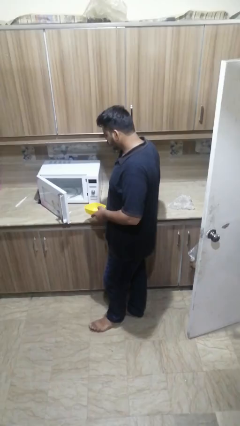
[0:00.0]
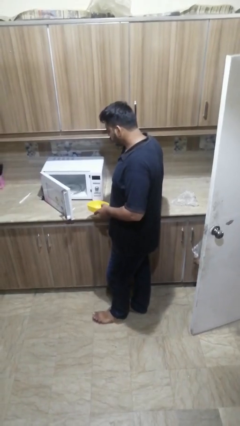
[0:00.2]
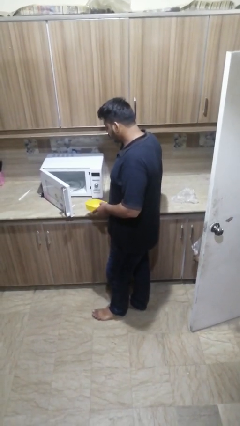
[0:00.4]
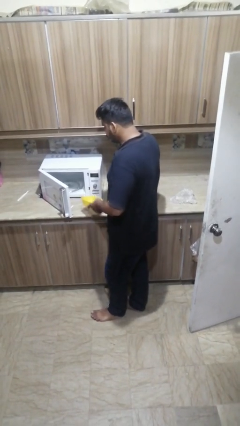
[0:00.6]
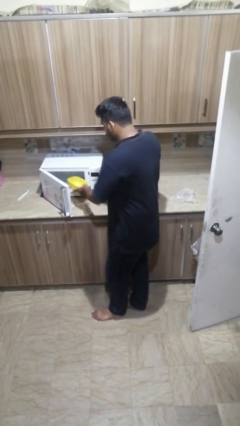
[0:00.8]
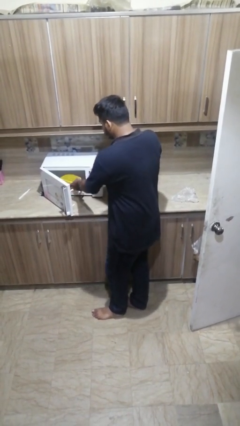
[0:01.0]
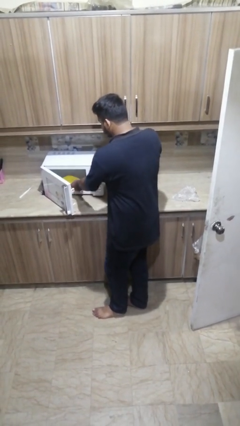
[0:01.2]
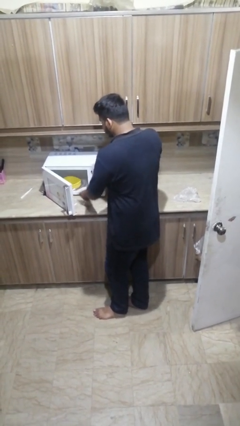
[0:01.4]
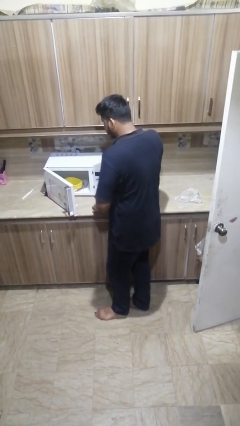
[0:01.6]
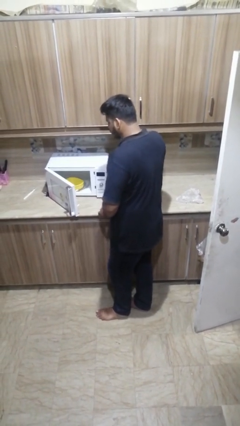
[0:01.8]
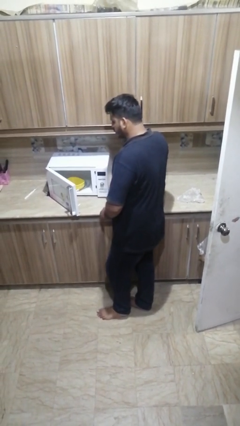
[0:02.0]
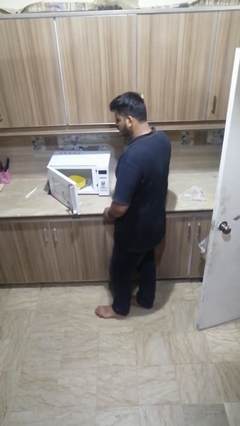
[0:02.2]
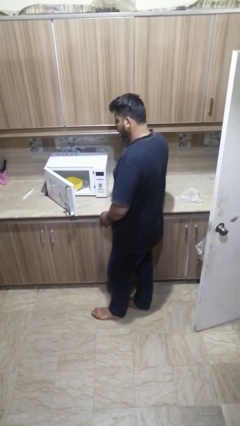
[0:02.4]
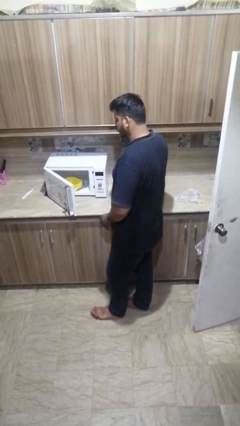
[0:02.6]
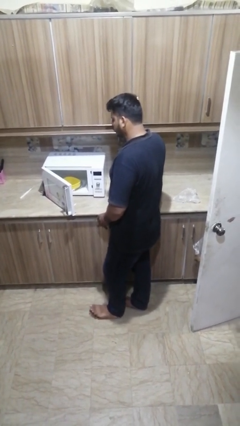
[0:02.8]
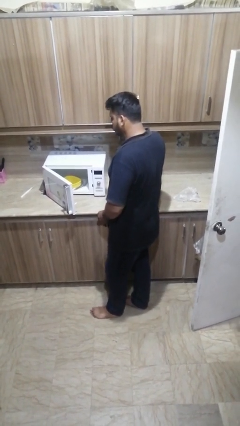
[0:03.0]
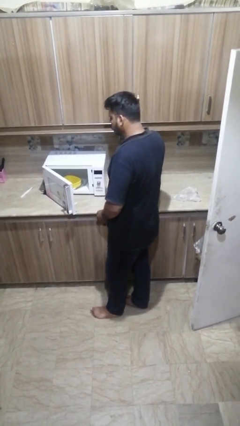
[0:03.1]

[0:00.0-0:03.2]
person puts object into microwave

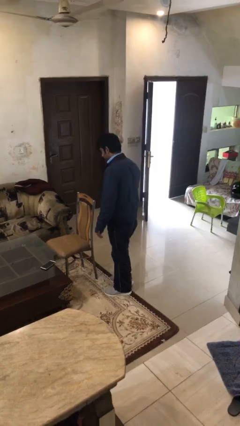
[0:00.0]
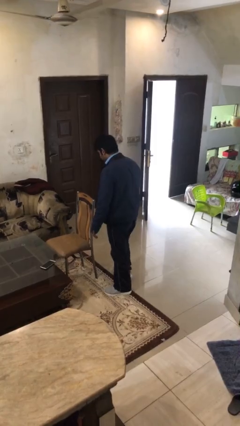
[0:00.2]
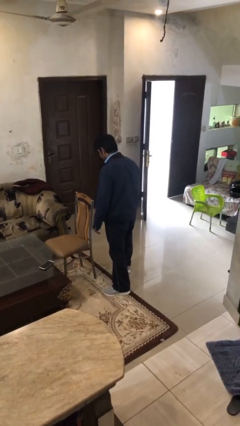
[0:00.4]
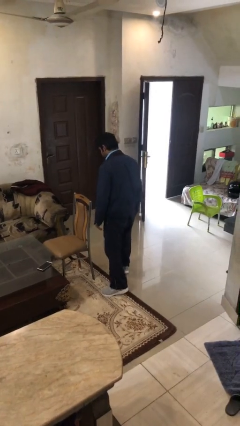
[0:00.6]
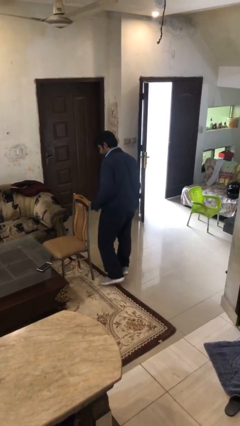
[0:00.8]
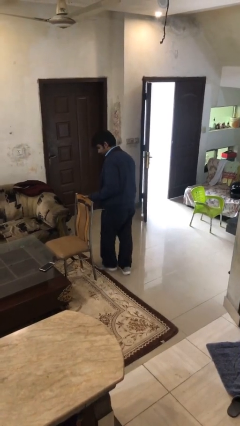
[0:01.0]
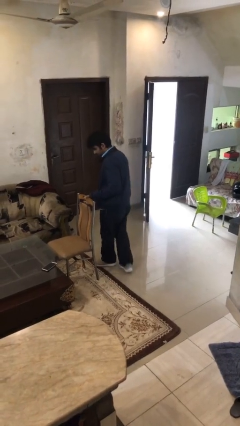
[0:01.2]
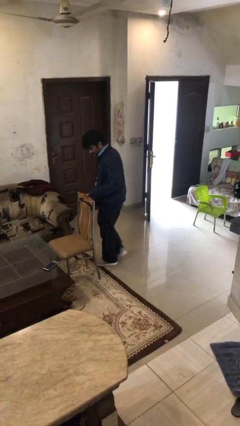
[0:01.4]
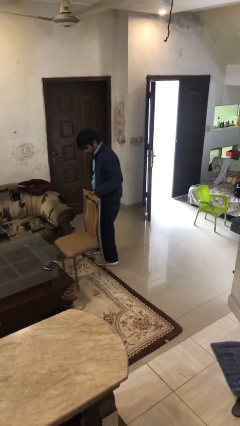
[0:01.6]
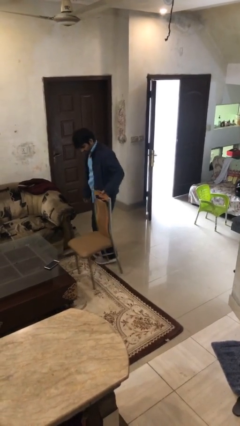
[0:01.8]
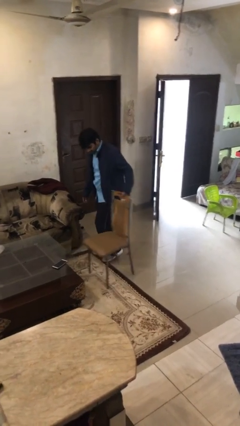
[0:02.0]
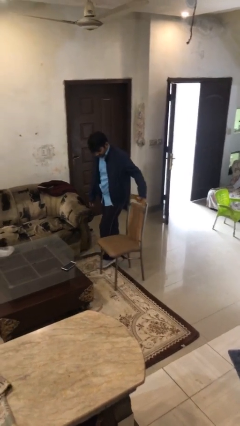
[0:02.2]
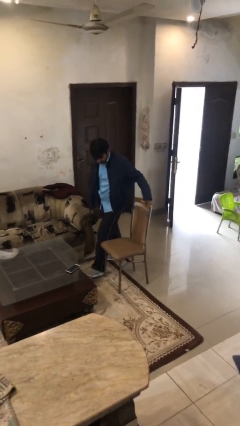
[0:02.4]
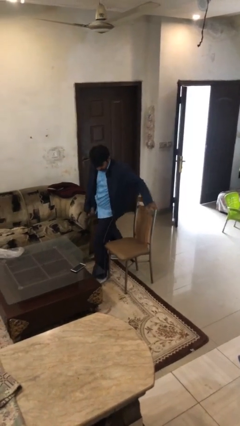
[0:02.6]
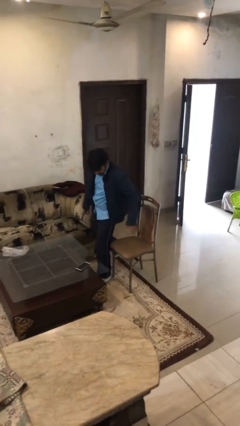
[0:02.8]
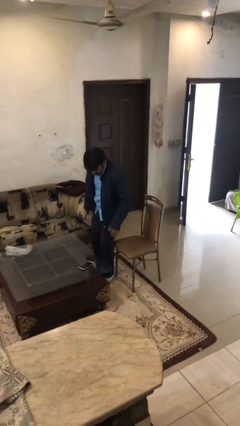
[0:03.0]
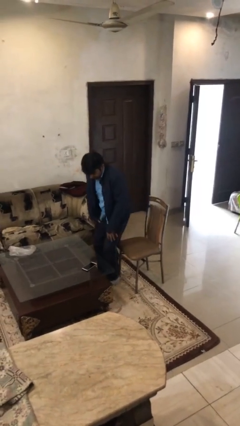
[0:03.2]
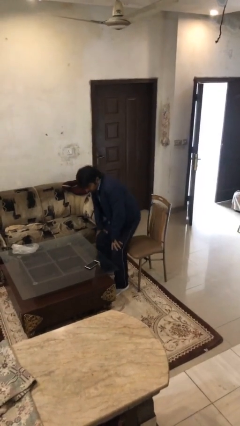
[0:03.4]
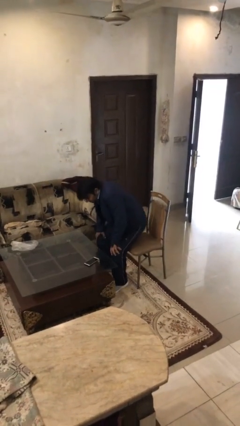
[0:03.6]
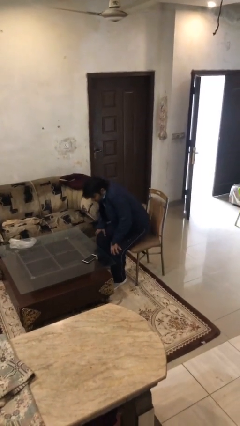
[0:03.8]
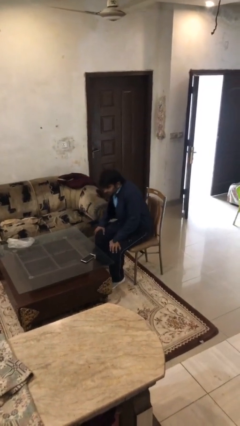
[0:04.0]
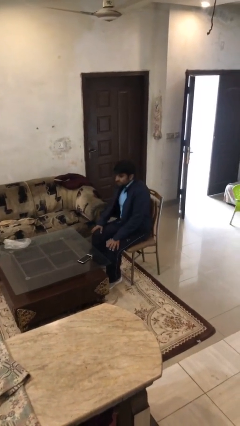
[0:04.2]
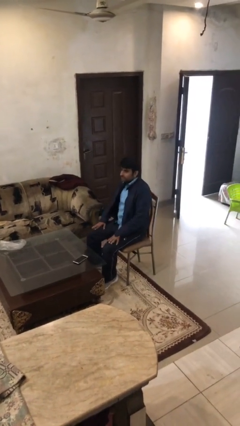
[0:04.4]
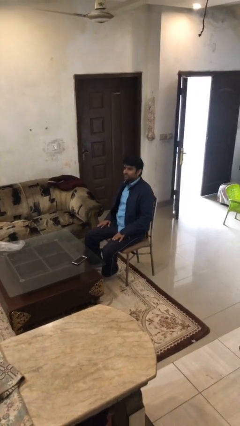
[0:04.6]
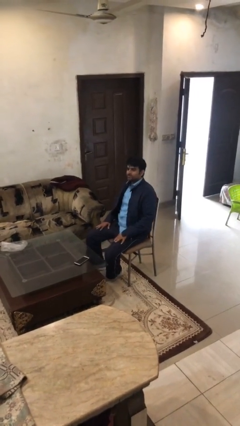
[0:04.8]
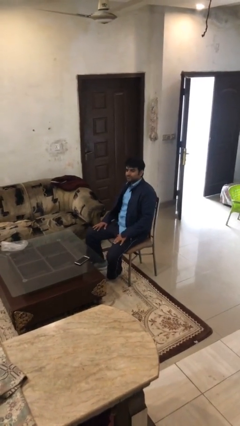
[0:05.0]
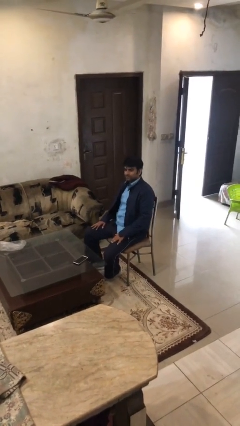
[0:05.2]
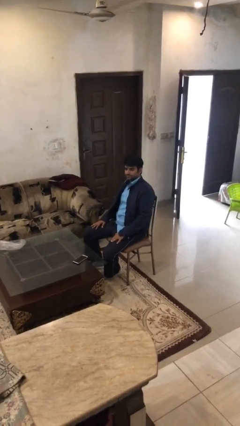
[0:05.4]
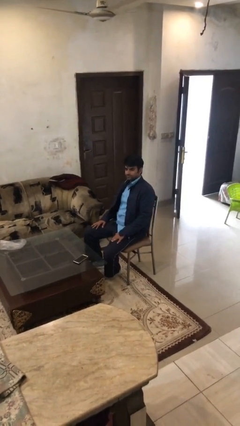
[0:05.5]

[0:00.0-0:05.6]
person sits down

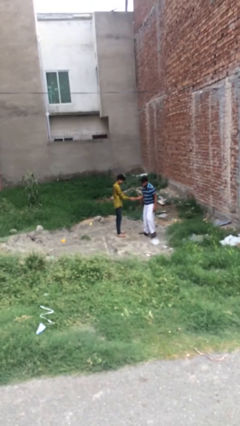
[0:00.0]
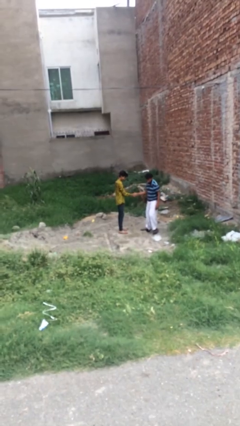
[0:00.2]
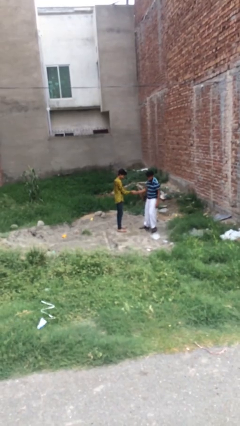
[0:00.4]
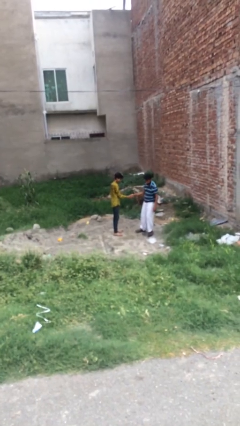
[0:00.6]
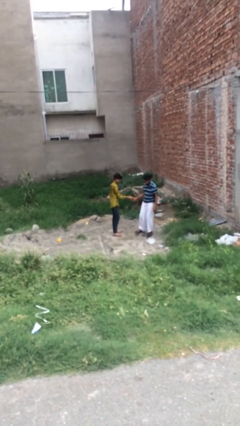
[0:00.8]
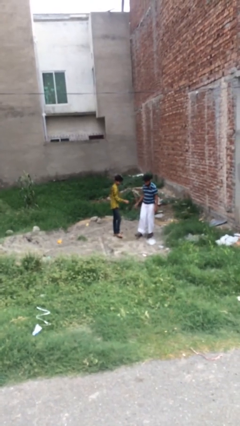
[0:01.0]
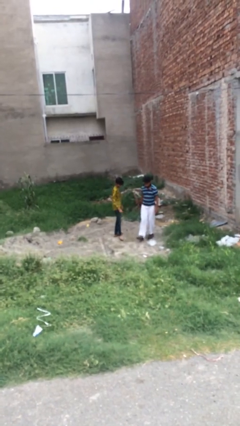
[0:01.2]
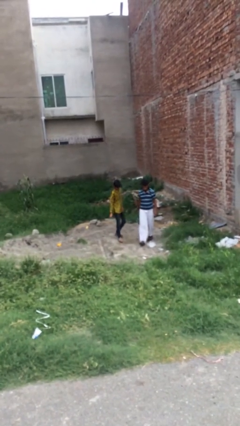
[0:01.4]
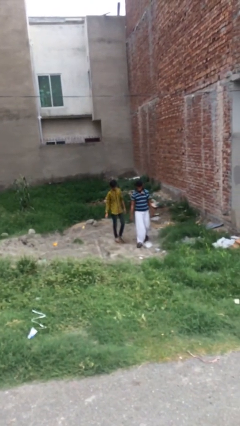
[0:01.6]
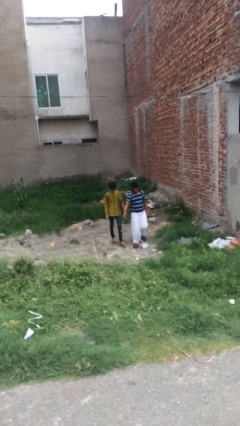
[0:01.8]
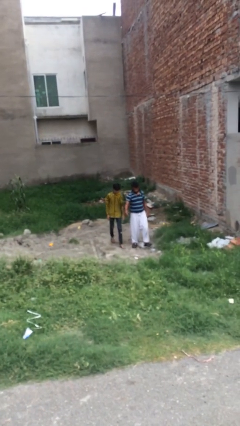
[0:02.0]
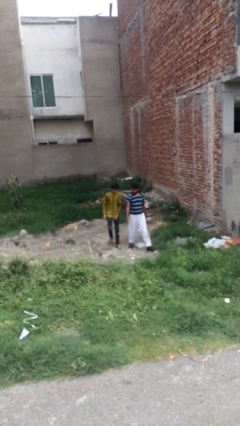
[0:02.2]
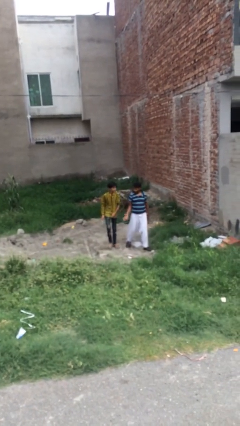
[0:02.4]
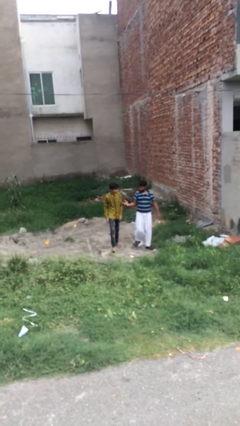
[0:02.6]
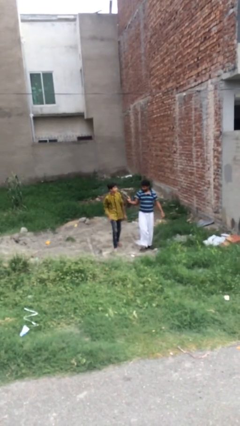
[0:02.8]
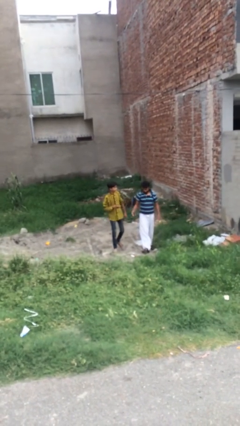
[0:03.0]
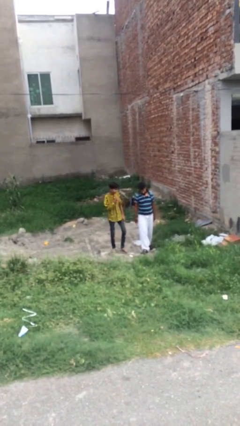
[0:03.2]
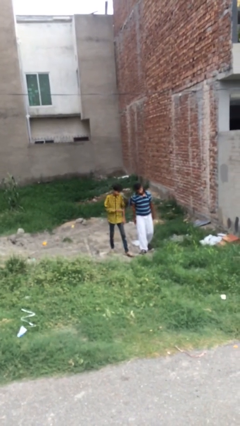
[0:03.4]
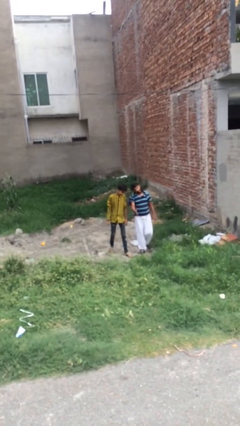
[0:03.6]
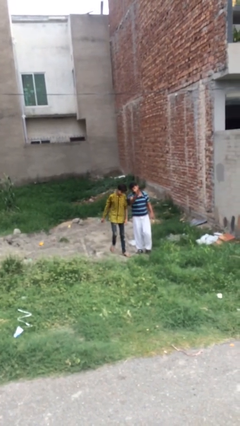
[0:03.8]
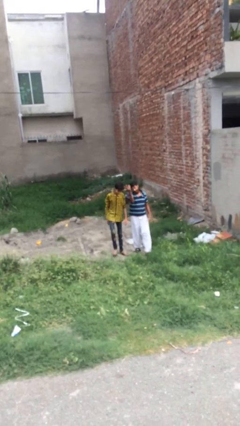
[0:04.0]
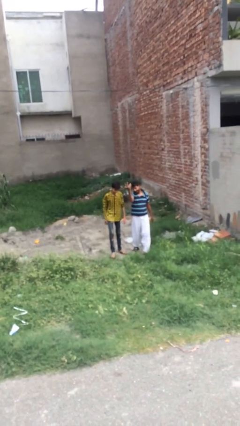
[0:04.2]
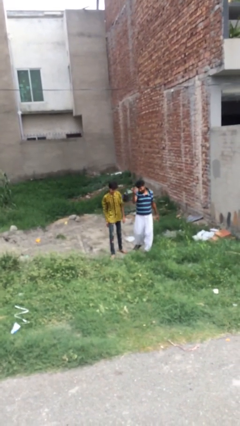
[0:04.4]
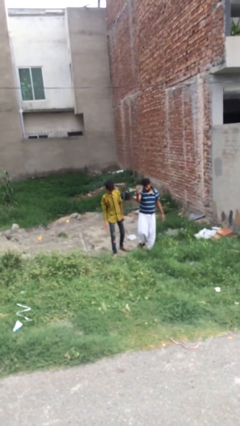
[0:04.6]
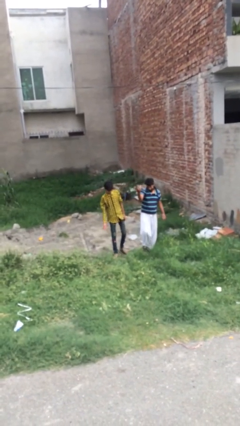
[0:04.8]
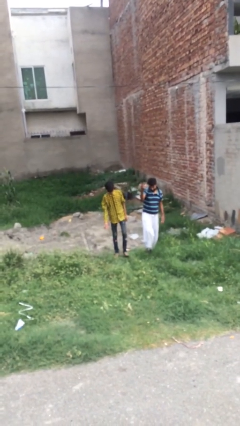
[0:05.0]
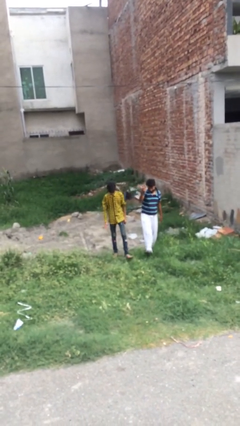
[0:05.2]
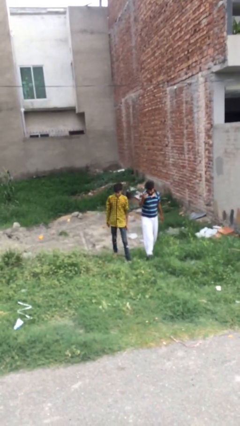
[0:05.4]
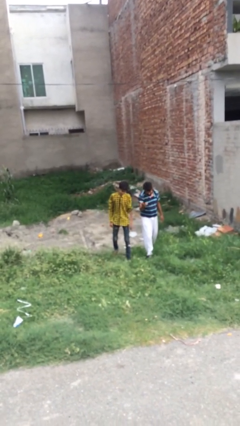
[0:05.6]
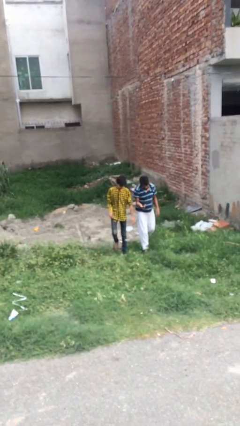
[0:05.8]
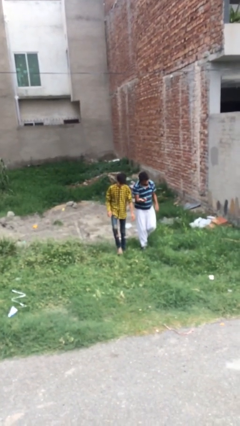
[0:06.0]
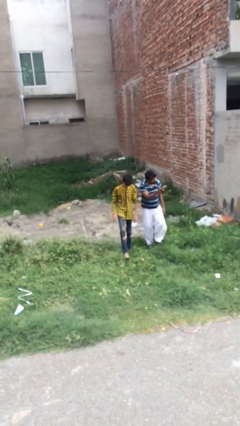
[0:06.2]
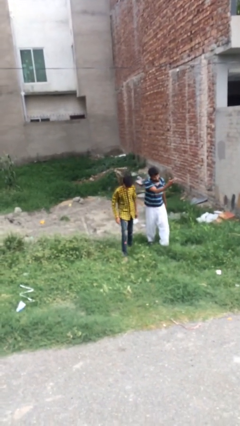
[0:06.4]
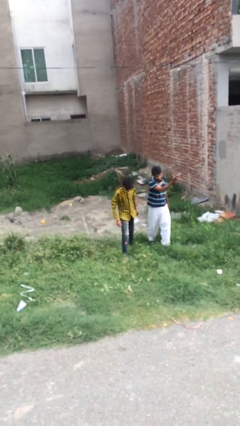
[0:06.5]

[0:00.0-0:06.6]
person talks to person

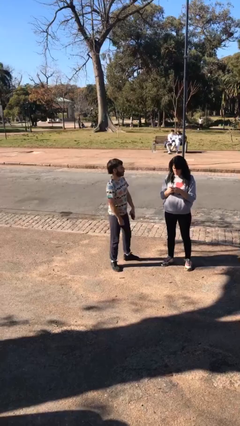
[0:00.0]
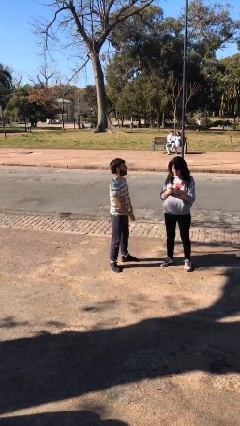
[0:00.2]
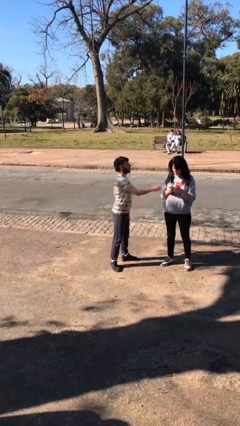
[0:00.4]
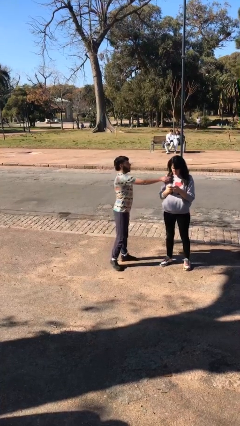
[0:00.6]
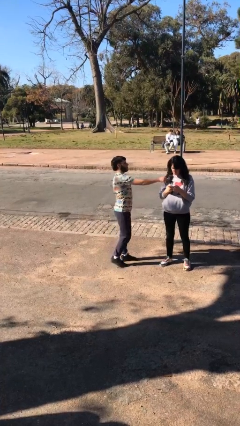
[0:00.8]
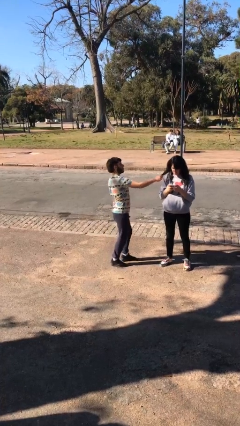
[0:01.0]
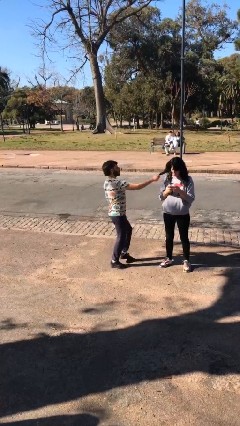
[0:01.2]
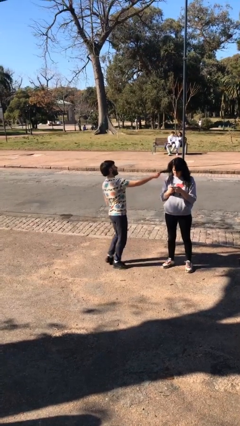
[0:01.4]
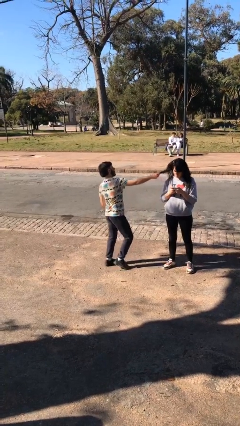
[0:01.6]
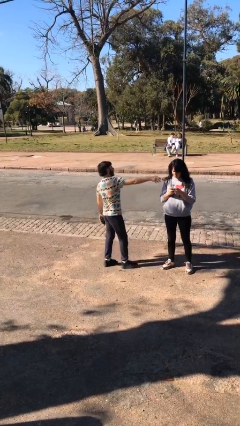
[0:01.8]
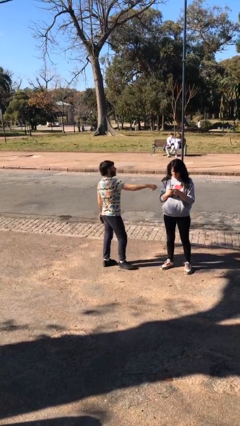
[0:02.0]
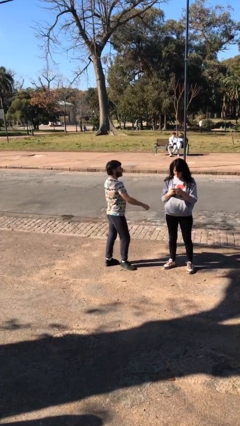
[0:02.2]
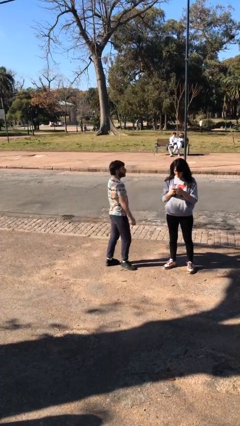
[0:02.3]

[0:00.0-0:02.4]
person grabs person by hair
